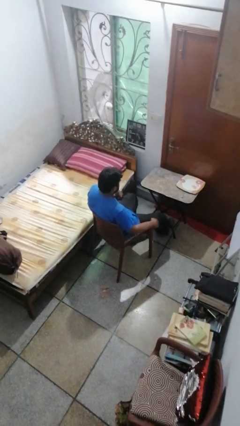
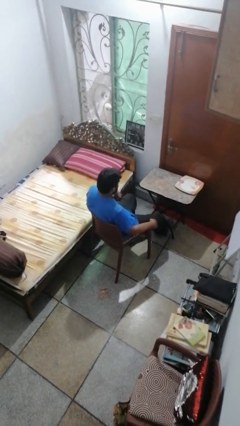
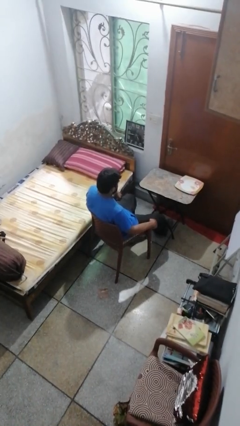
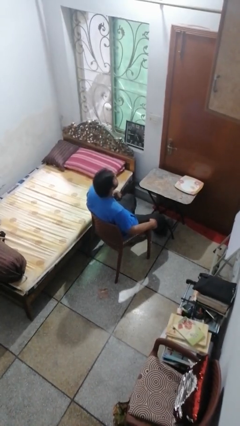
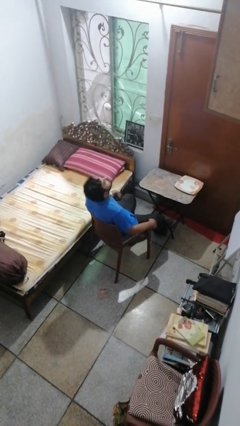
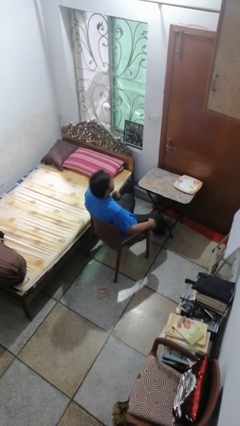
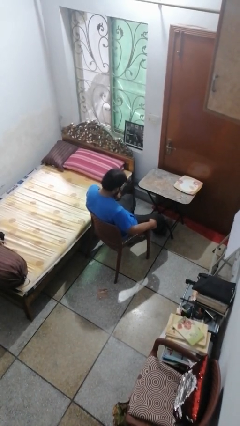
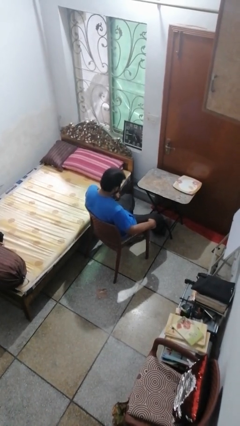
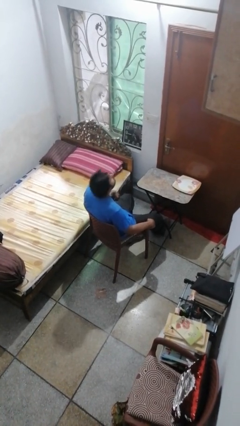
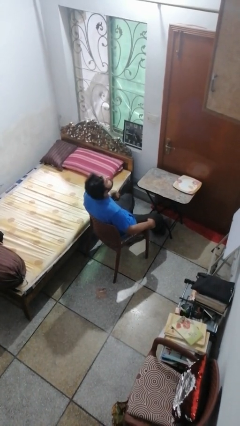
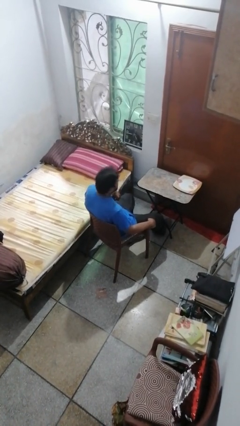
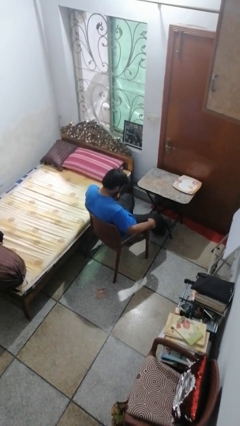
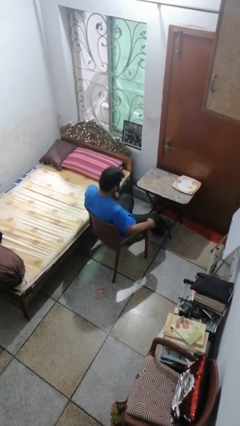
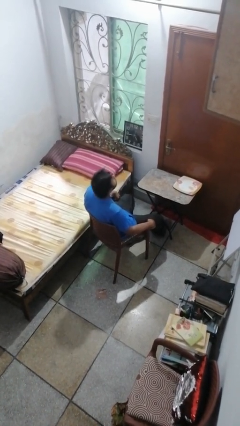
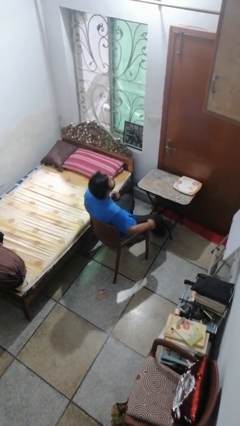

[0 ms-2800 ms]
person nods head

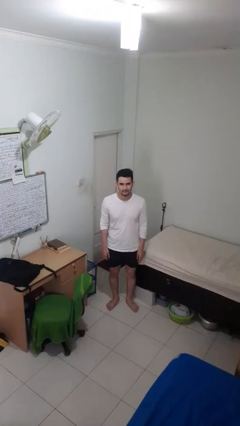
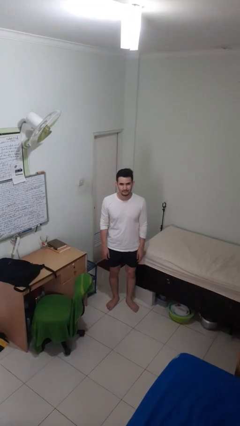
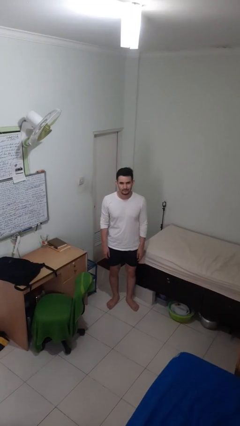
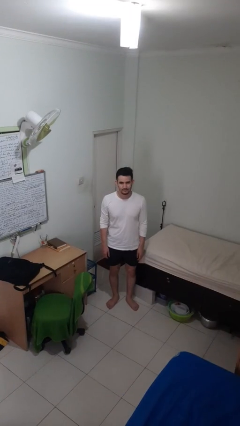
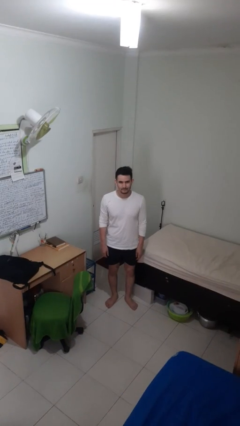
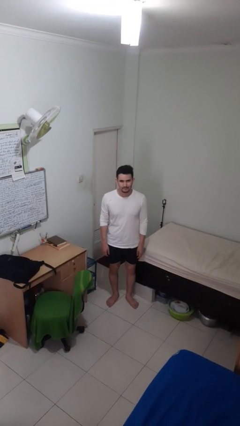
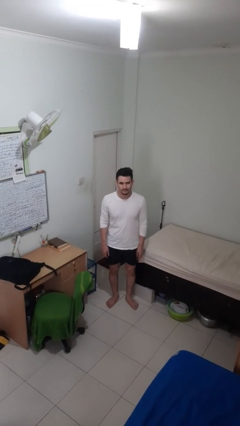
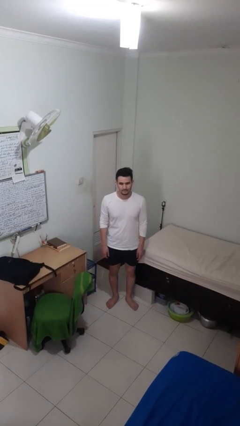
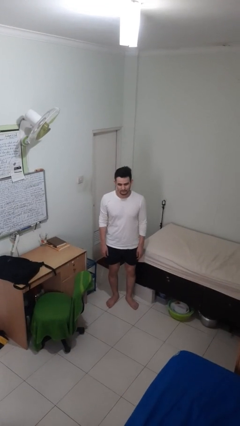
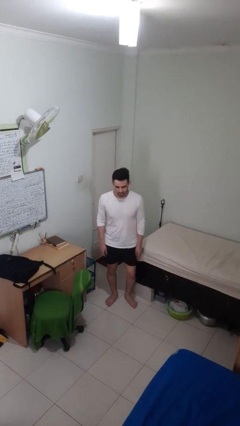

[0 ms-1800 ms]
person stands up from floor

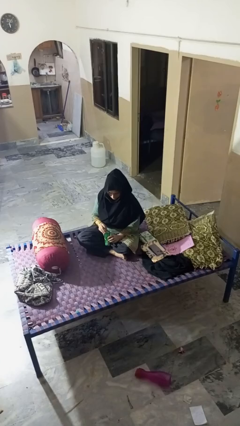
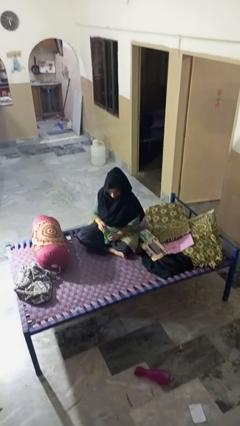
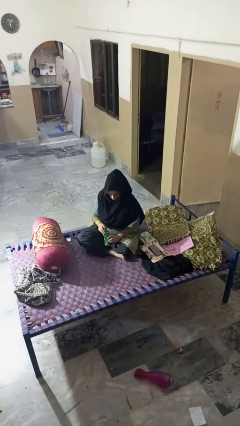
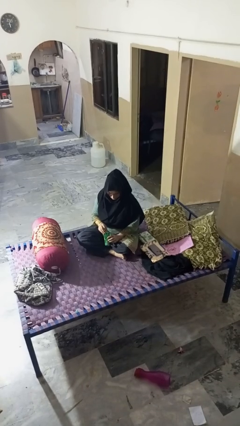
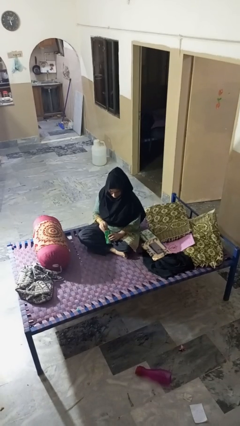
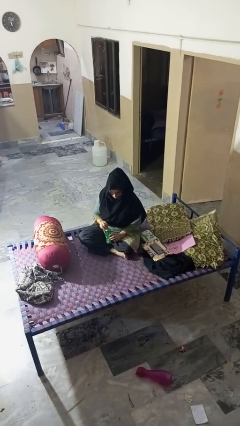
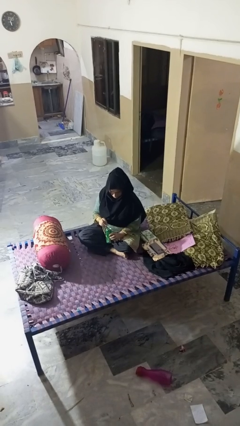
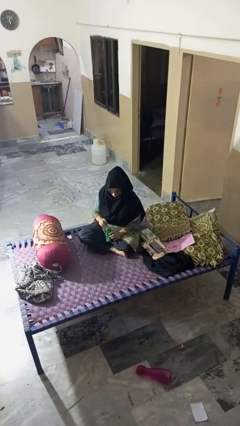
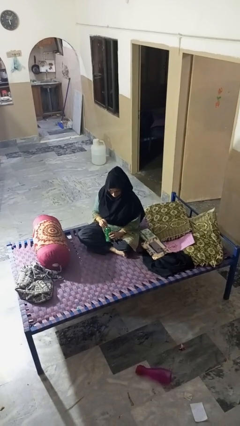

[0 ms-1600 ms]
person opens can with can opener

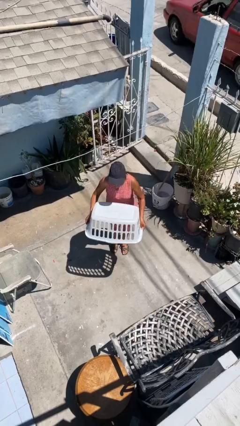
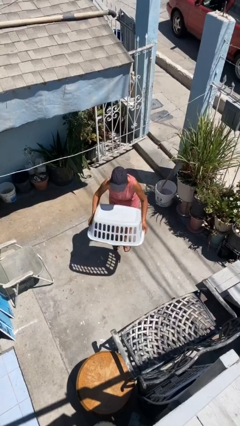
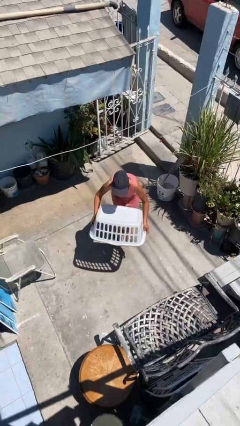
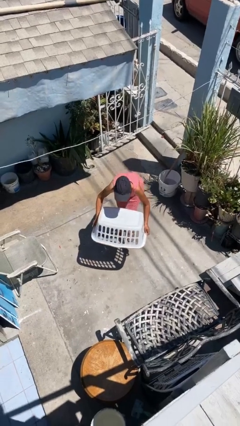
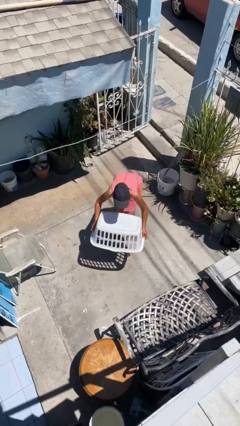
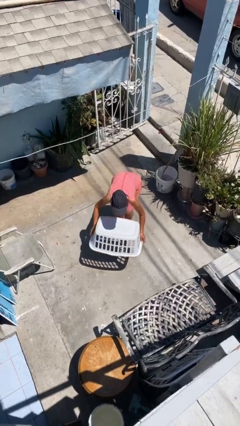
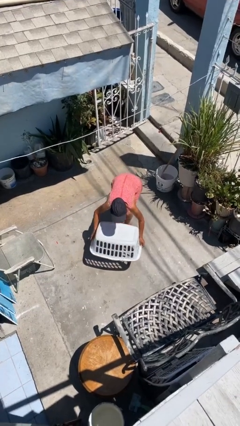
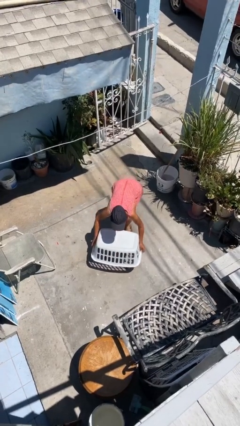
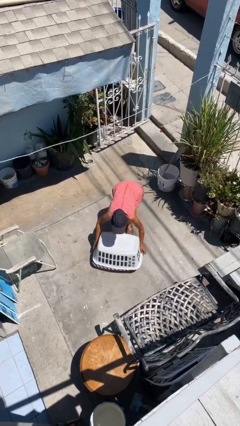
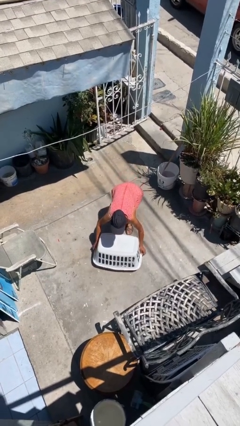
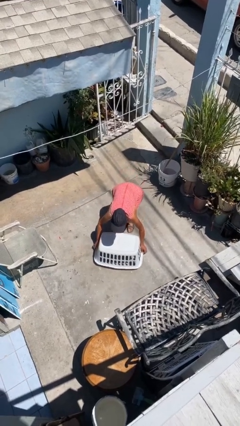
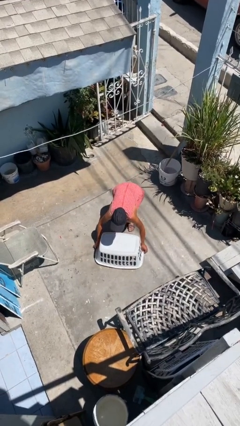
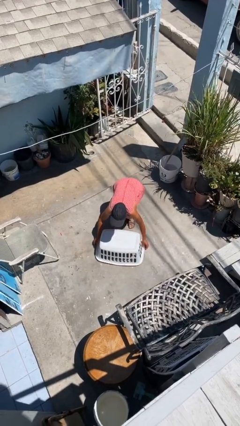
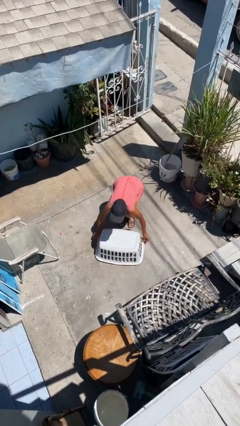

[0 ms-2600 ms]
person puts down object on floor

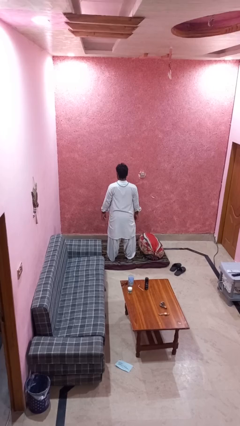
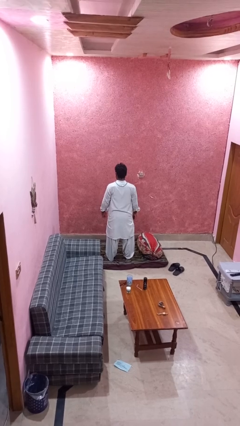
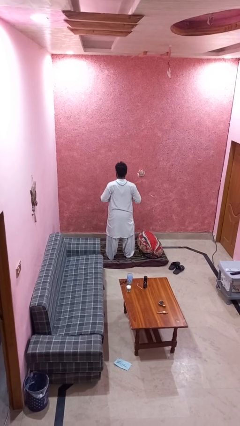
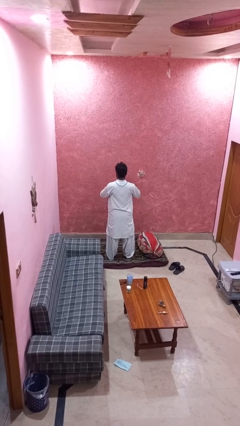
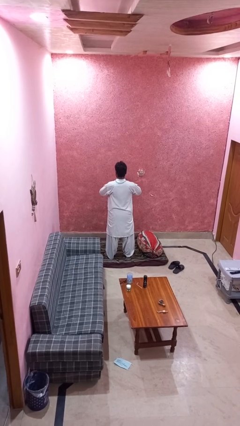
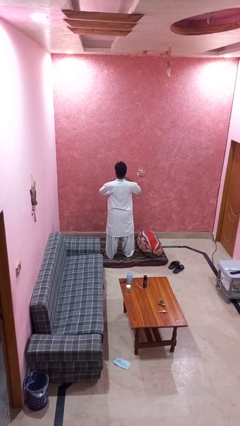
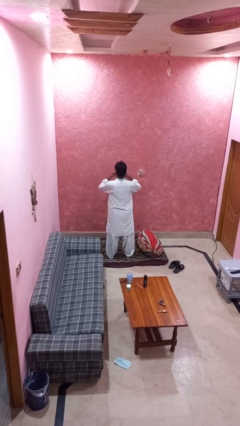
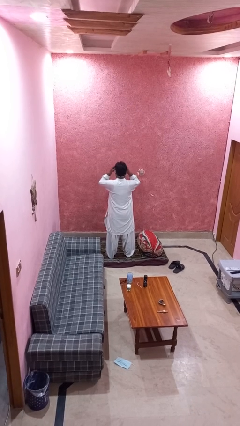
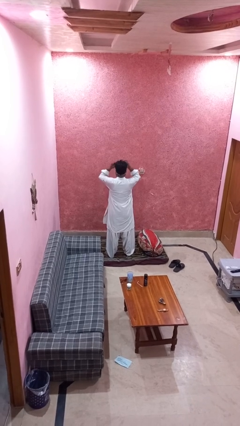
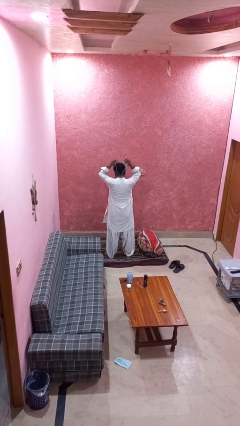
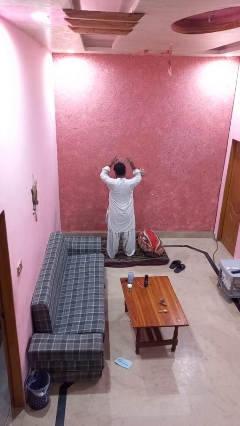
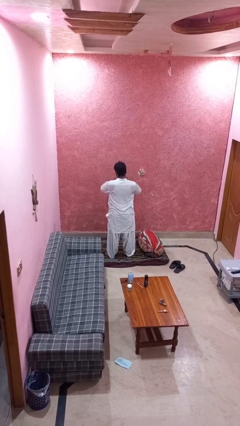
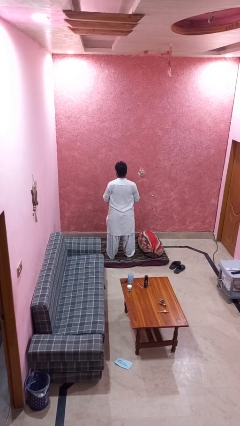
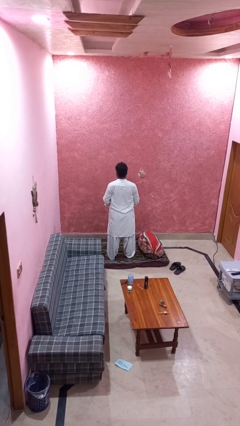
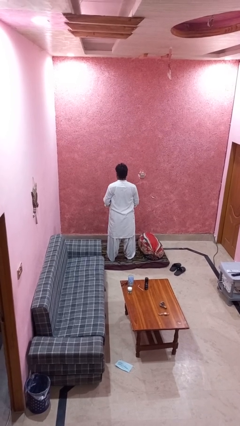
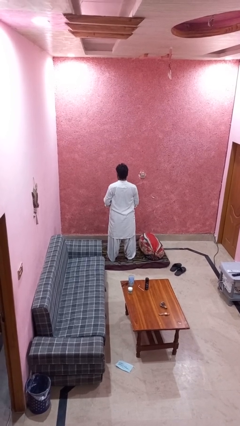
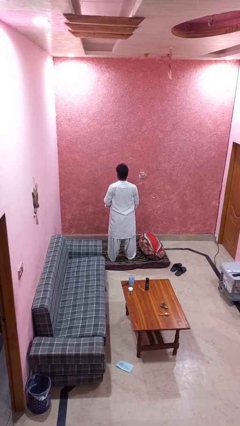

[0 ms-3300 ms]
person takes off necklace

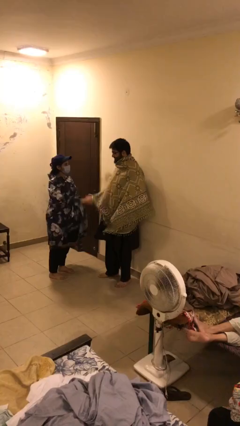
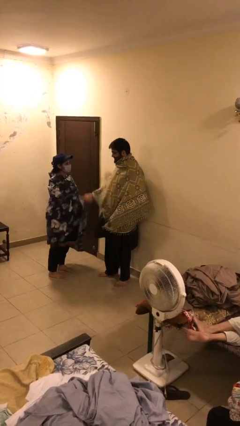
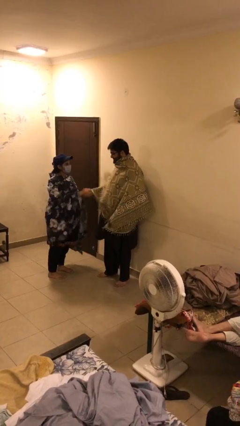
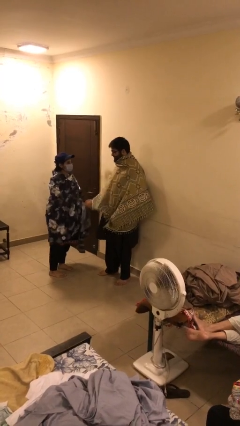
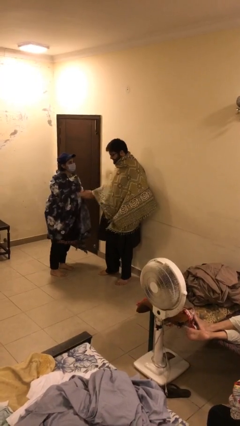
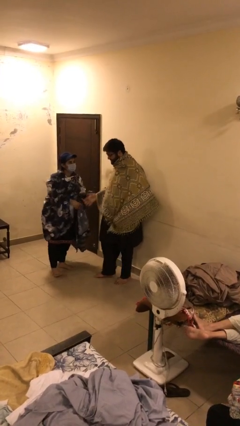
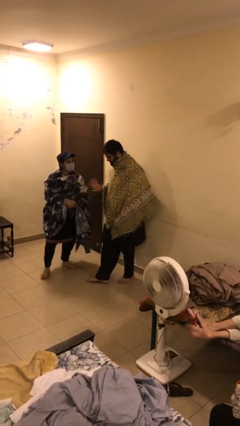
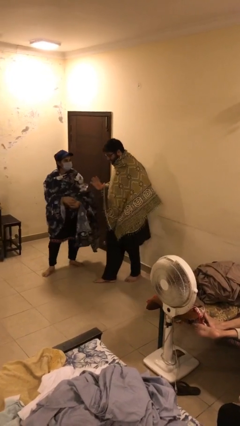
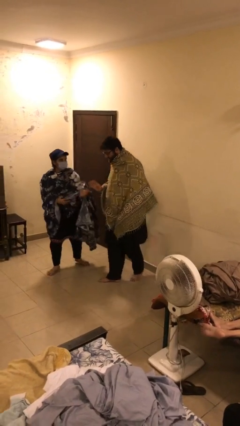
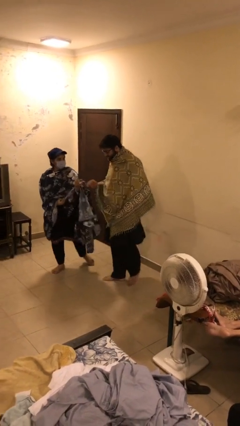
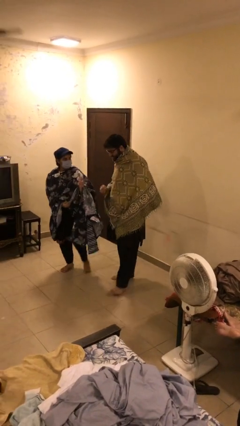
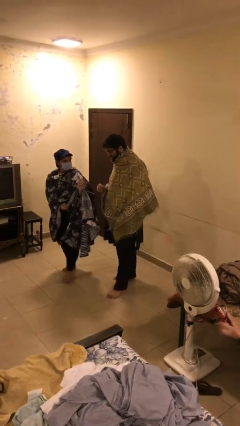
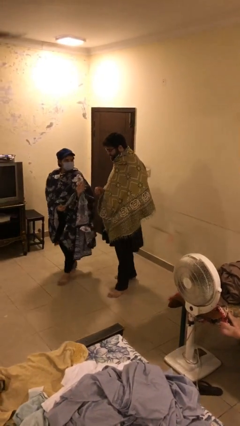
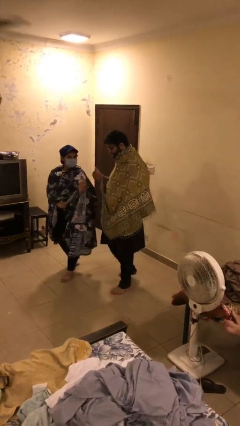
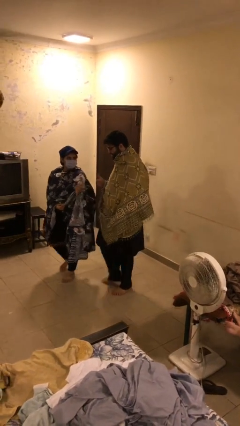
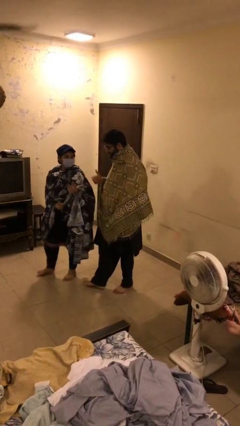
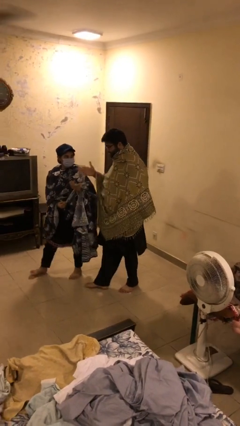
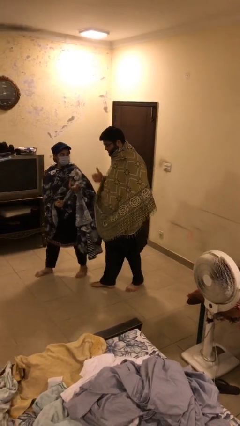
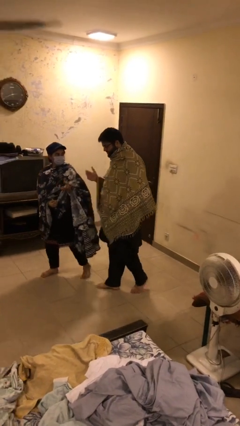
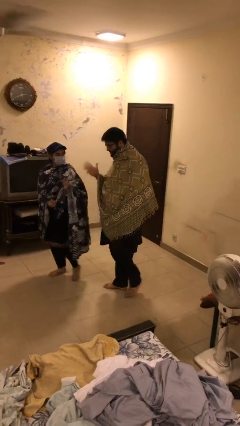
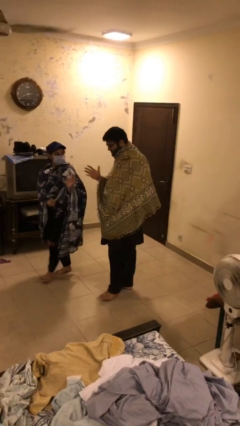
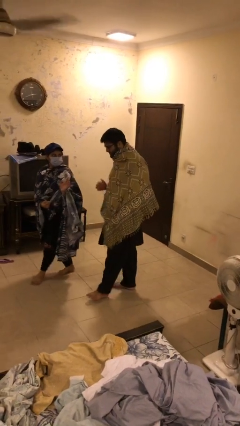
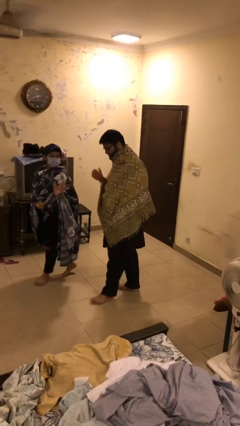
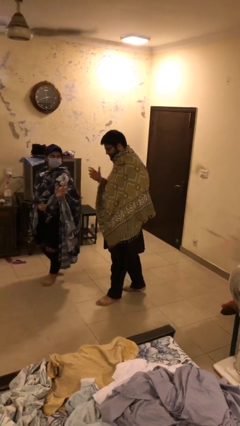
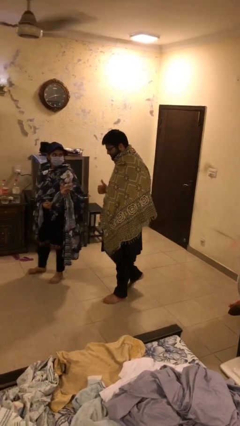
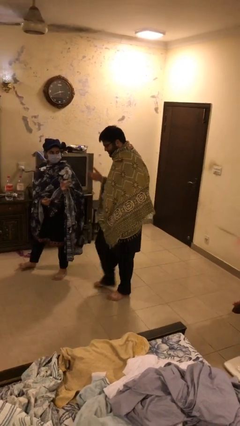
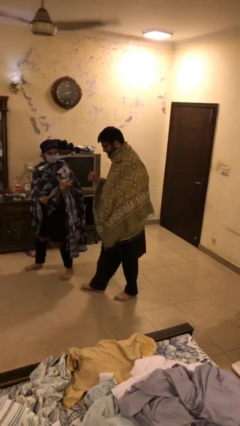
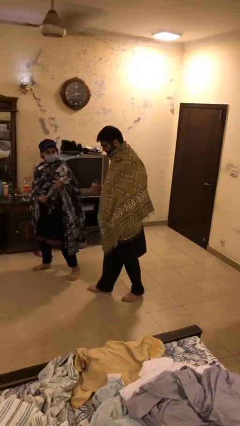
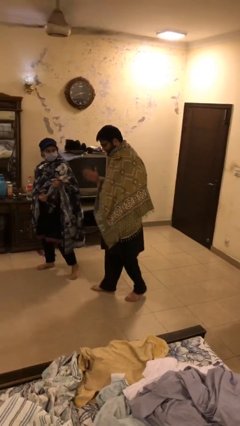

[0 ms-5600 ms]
person talks to person
